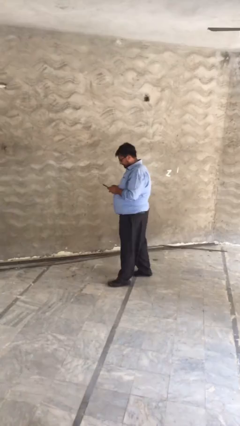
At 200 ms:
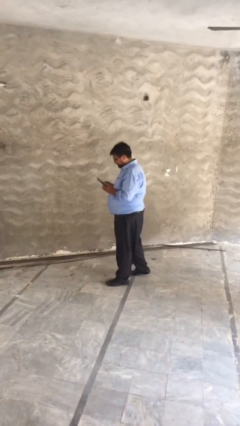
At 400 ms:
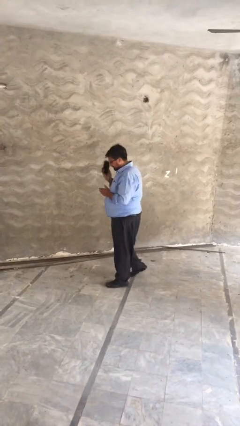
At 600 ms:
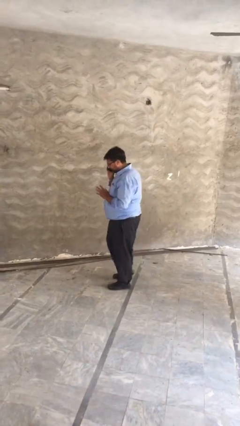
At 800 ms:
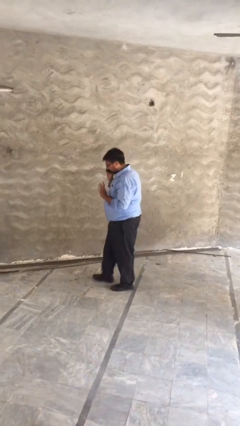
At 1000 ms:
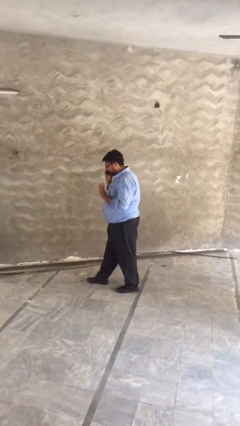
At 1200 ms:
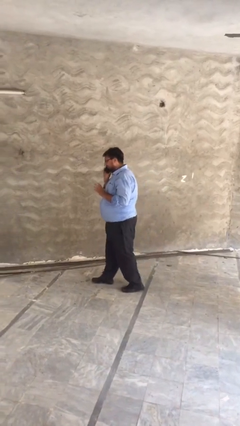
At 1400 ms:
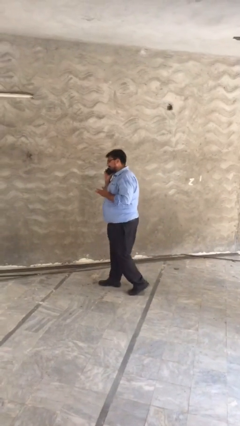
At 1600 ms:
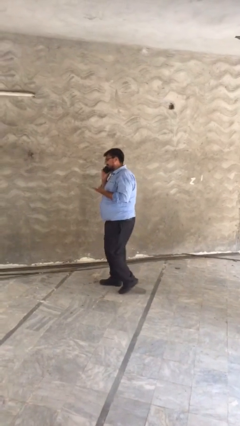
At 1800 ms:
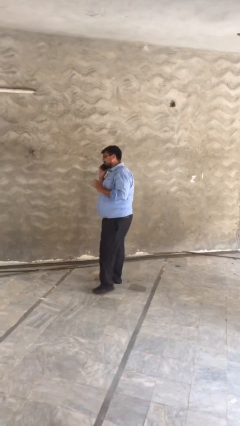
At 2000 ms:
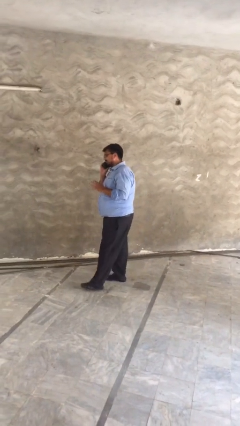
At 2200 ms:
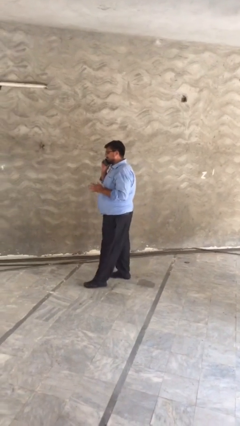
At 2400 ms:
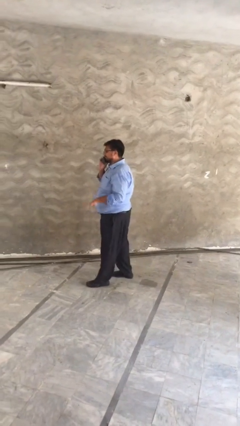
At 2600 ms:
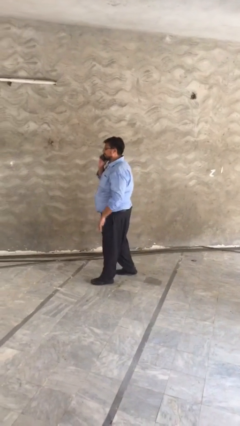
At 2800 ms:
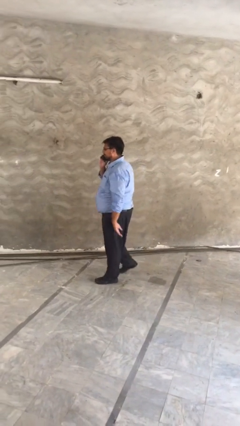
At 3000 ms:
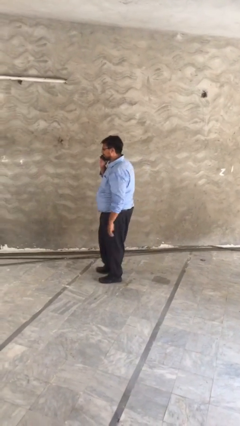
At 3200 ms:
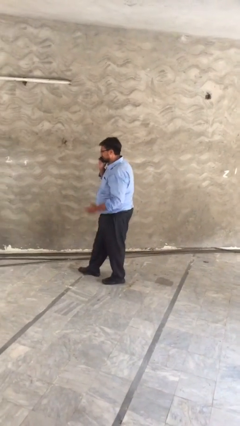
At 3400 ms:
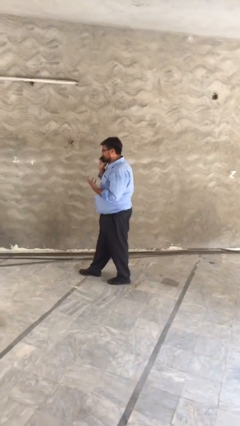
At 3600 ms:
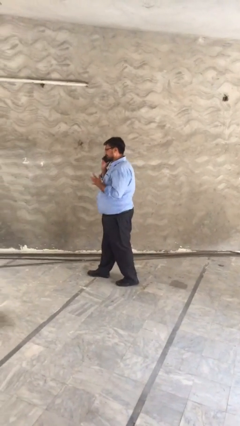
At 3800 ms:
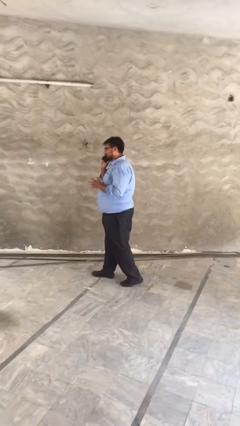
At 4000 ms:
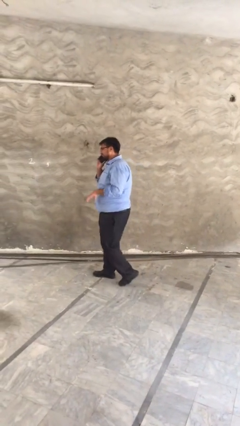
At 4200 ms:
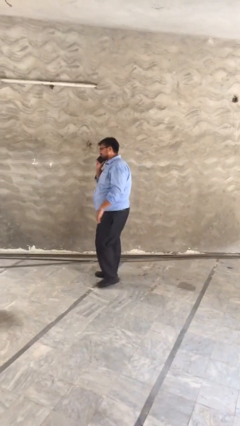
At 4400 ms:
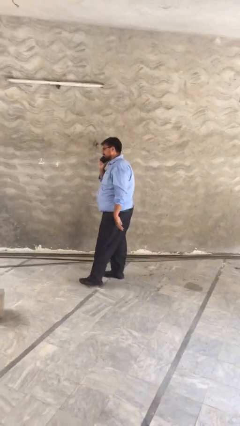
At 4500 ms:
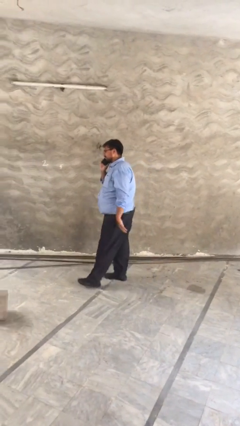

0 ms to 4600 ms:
person talks on phone

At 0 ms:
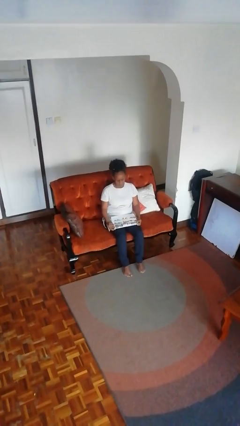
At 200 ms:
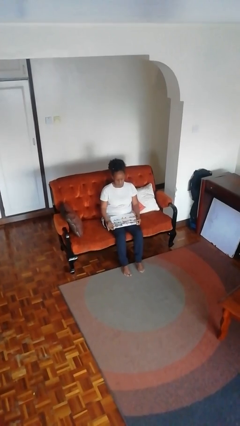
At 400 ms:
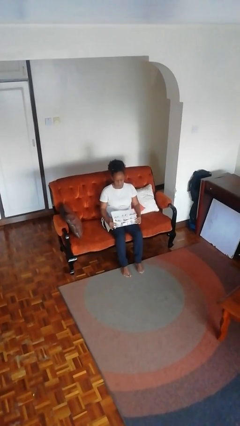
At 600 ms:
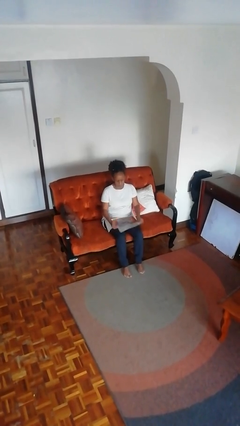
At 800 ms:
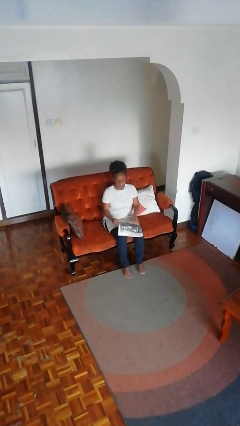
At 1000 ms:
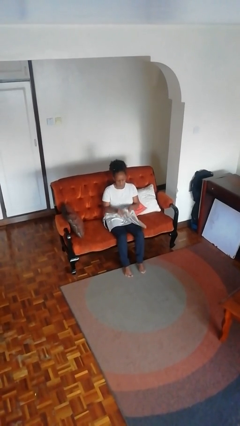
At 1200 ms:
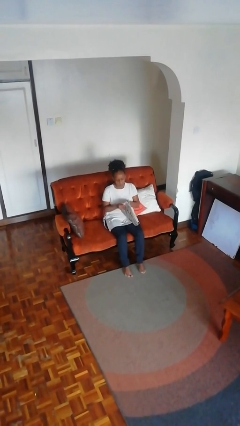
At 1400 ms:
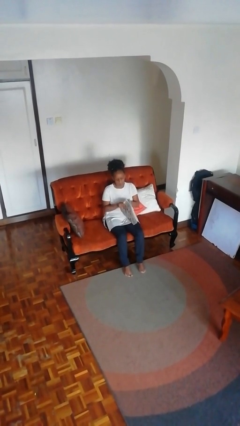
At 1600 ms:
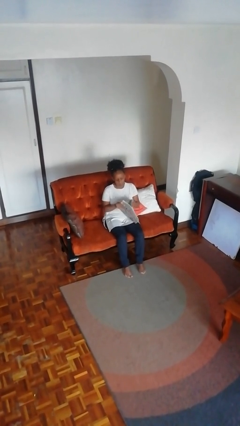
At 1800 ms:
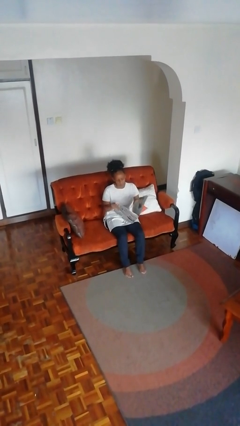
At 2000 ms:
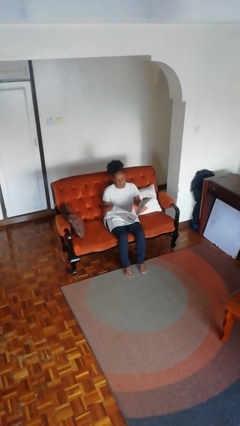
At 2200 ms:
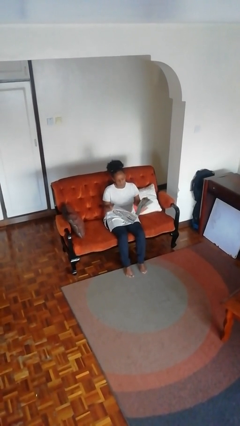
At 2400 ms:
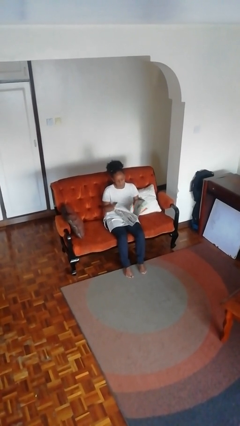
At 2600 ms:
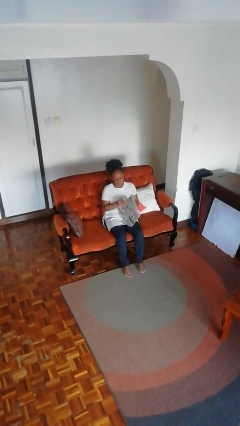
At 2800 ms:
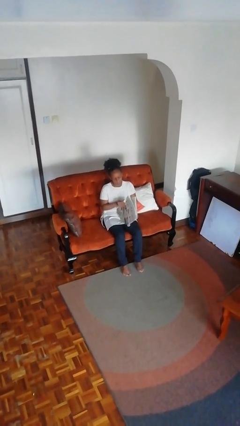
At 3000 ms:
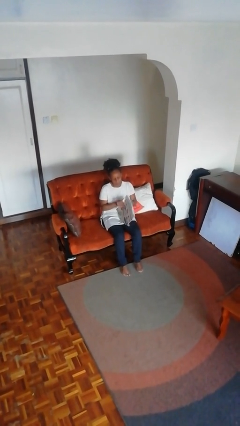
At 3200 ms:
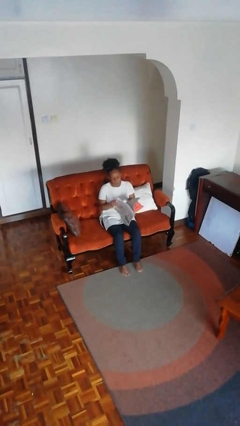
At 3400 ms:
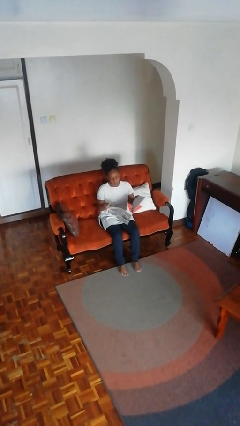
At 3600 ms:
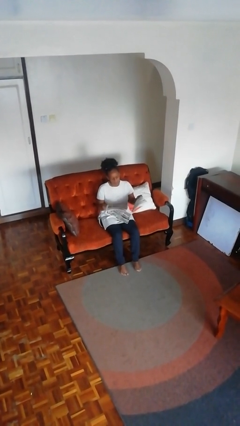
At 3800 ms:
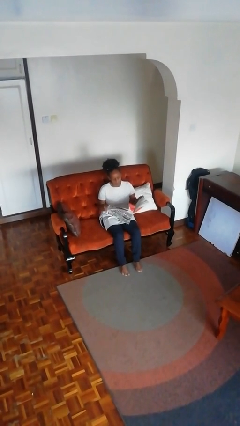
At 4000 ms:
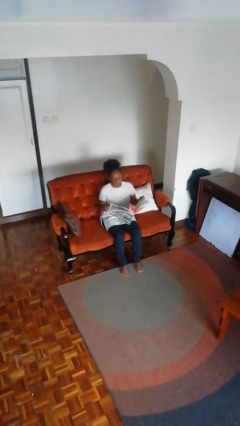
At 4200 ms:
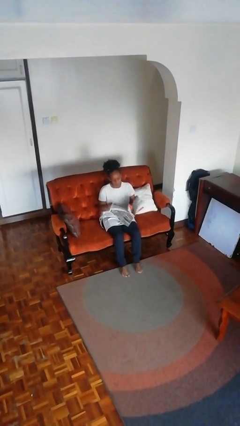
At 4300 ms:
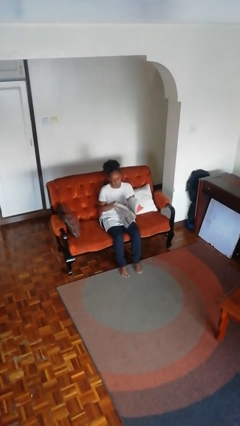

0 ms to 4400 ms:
person reads newspaper

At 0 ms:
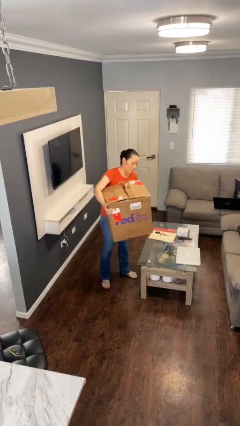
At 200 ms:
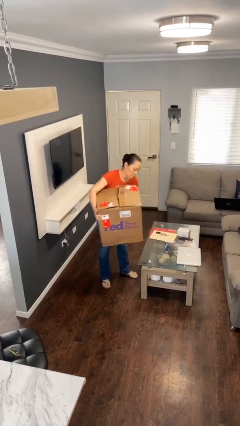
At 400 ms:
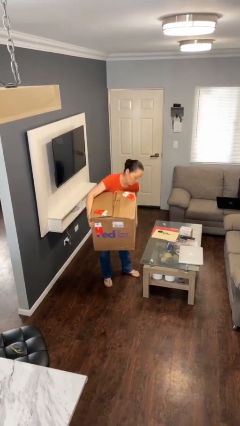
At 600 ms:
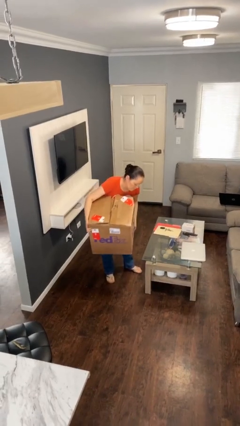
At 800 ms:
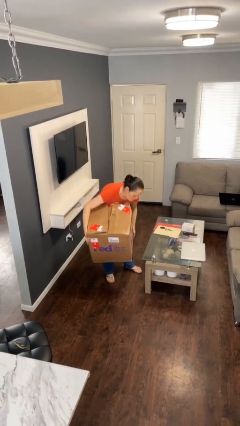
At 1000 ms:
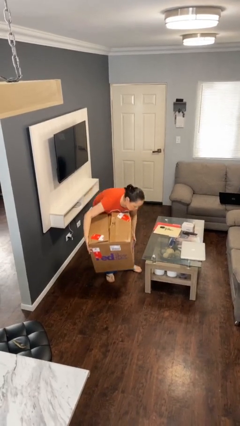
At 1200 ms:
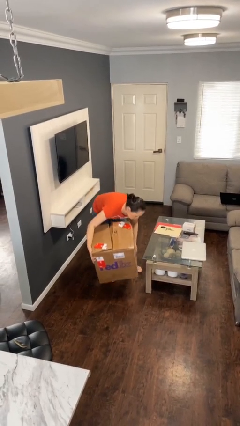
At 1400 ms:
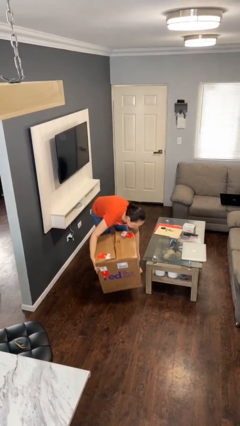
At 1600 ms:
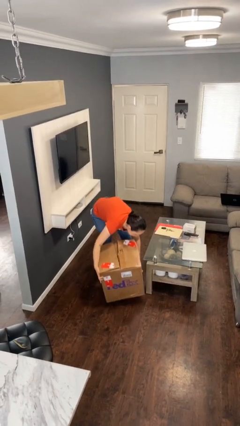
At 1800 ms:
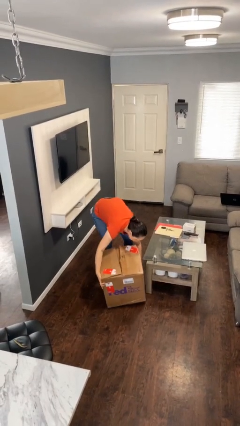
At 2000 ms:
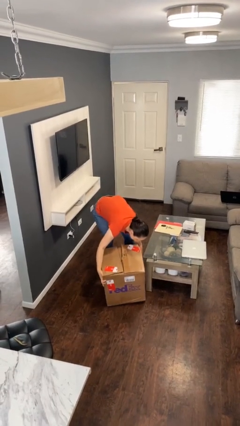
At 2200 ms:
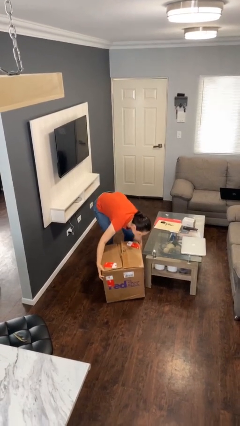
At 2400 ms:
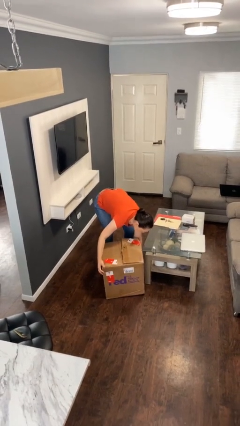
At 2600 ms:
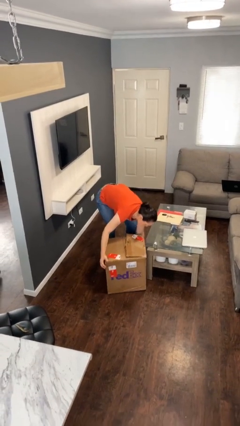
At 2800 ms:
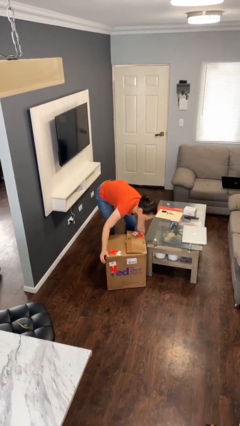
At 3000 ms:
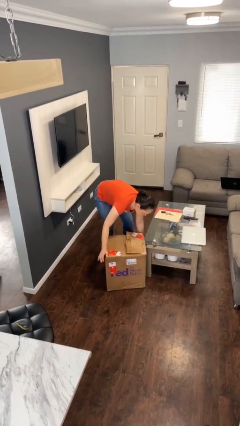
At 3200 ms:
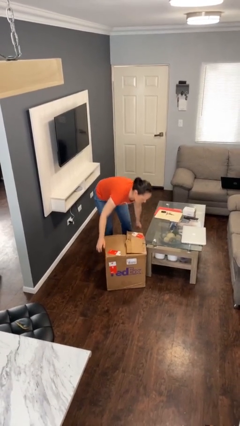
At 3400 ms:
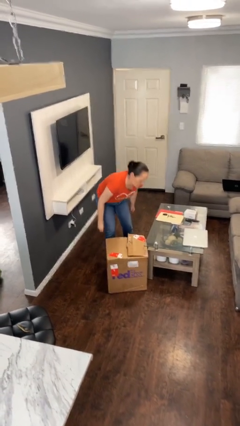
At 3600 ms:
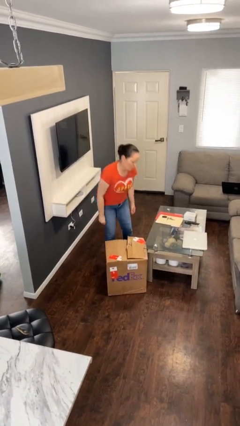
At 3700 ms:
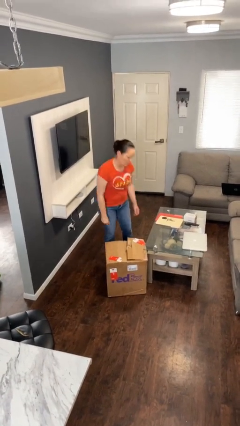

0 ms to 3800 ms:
person puts down object on floor

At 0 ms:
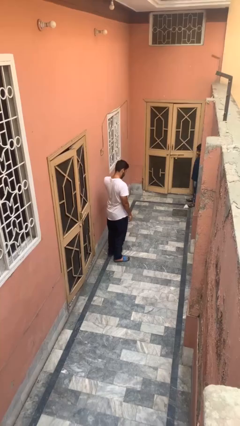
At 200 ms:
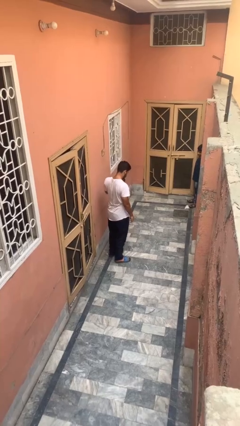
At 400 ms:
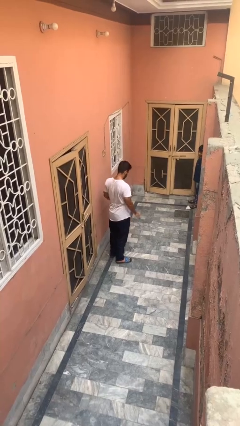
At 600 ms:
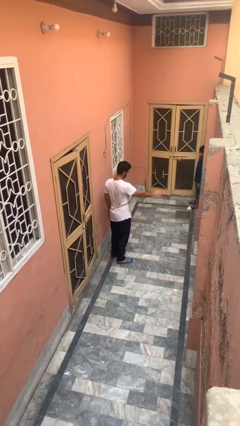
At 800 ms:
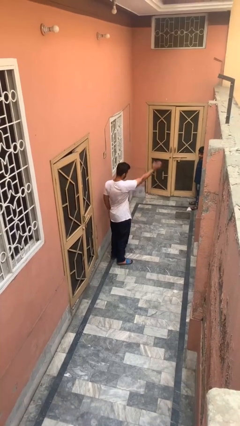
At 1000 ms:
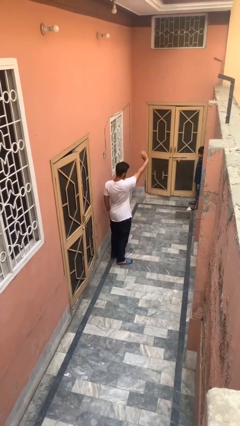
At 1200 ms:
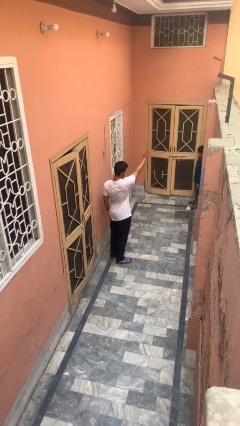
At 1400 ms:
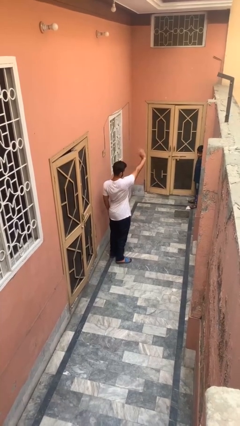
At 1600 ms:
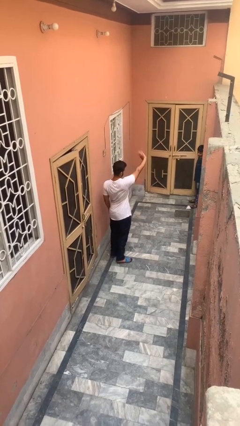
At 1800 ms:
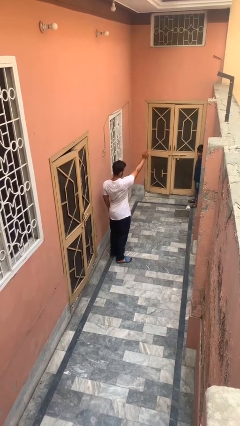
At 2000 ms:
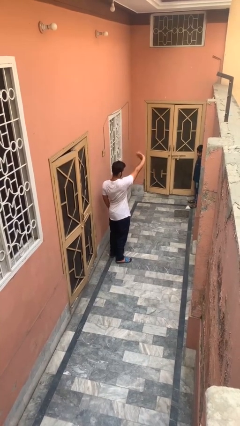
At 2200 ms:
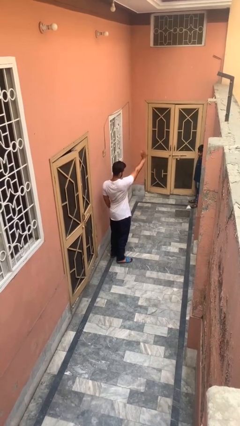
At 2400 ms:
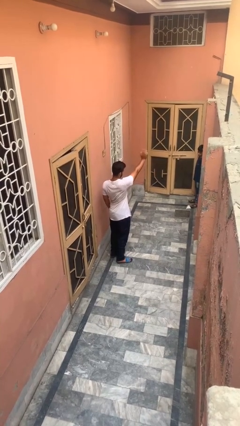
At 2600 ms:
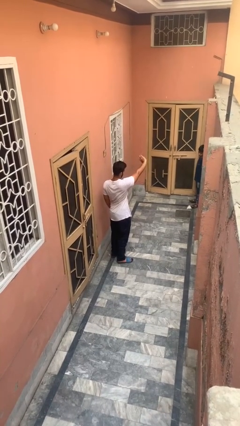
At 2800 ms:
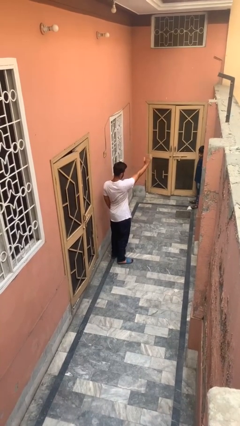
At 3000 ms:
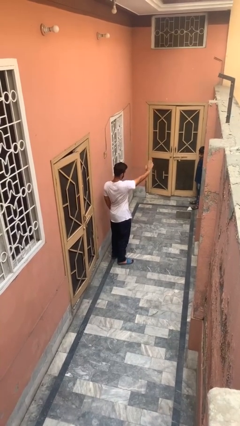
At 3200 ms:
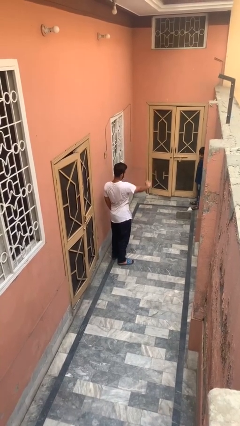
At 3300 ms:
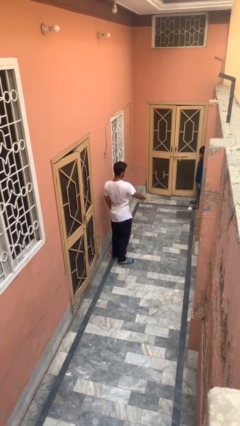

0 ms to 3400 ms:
person waves at person

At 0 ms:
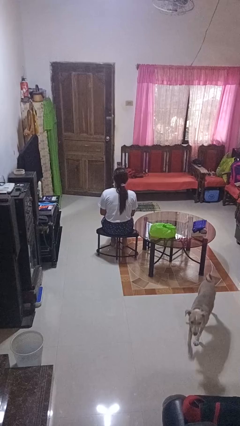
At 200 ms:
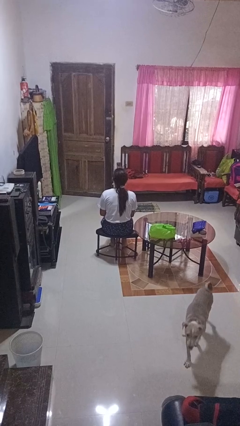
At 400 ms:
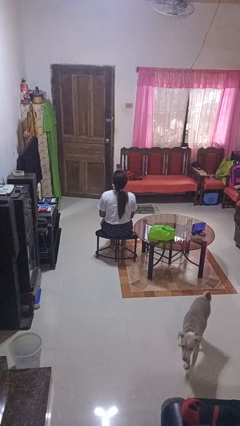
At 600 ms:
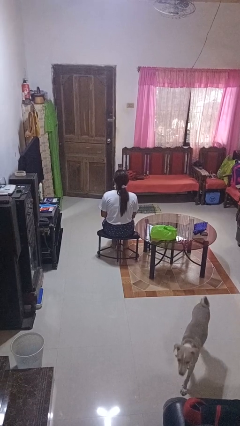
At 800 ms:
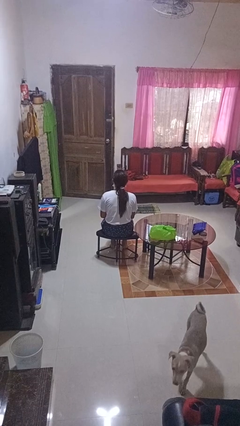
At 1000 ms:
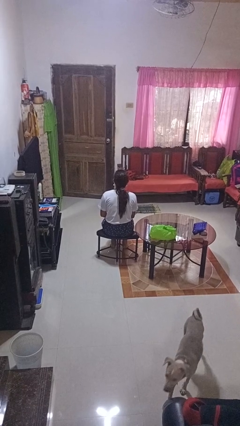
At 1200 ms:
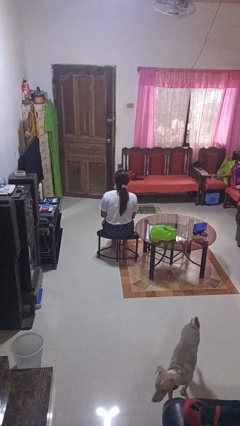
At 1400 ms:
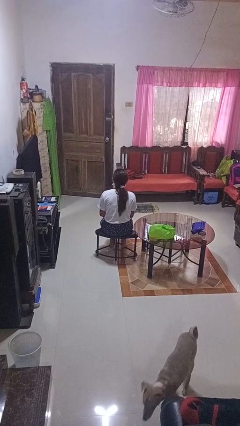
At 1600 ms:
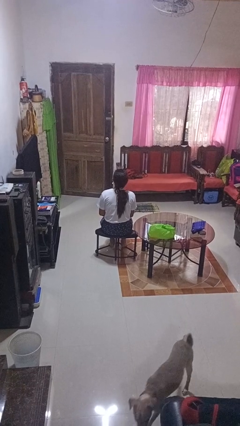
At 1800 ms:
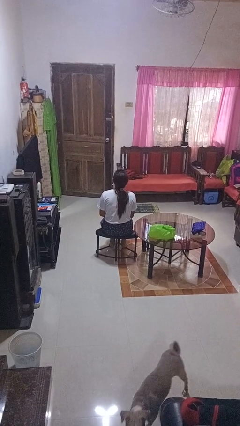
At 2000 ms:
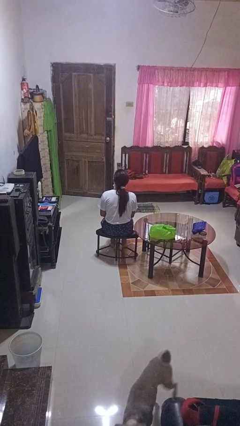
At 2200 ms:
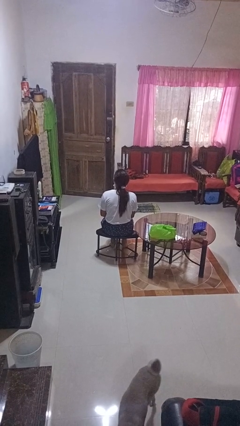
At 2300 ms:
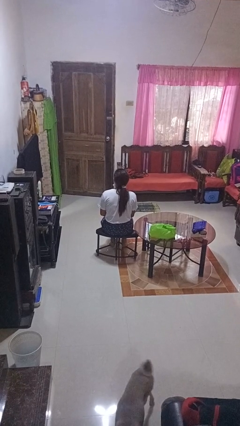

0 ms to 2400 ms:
person nods head
